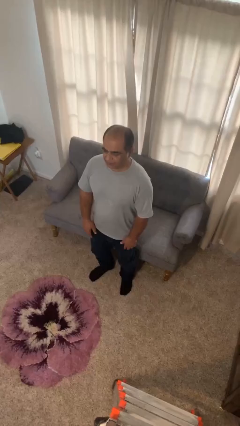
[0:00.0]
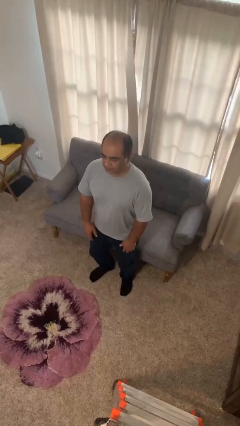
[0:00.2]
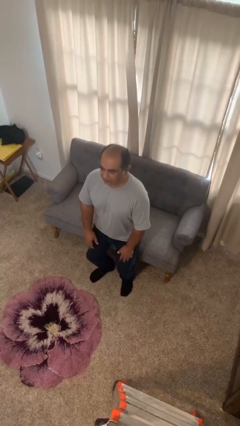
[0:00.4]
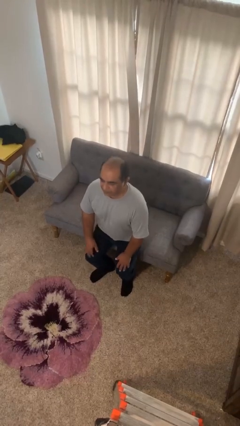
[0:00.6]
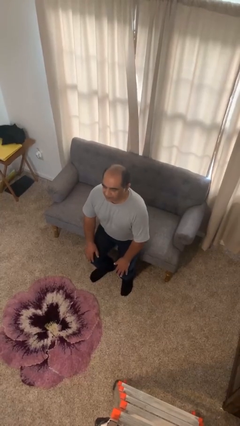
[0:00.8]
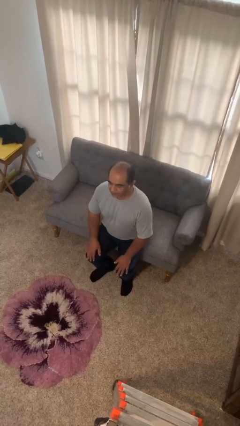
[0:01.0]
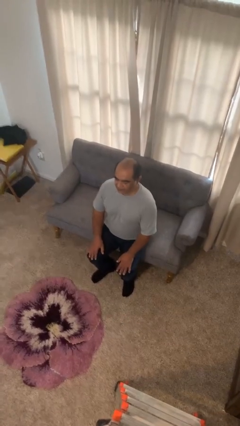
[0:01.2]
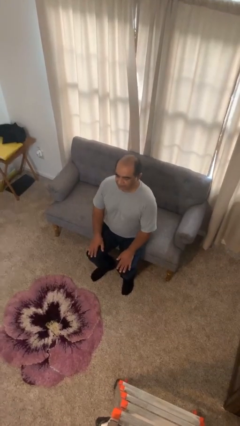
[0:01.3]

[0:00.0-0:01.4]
person sits down

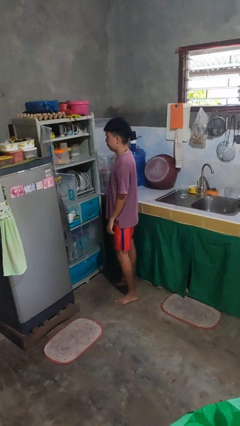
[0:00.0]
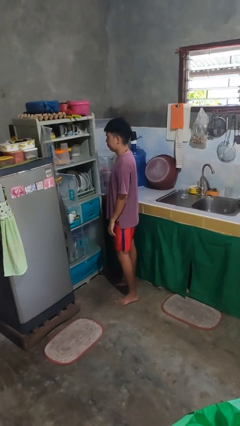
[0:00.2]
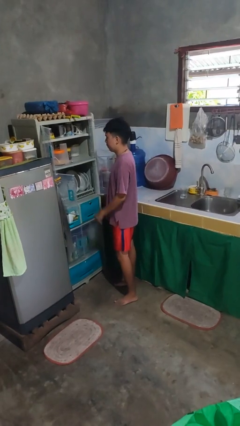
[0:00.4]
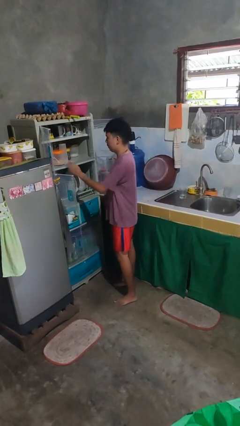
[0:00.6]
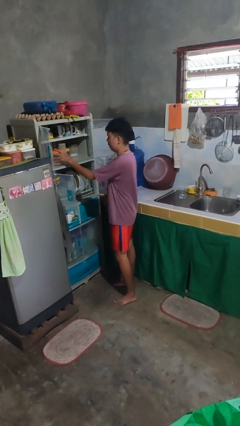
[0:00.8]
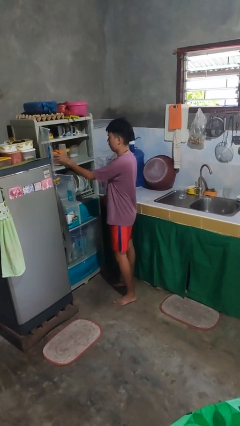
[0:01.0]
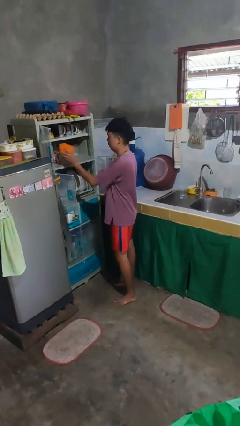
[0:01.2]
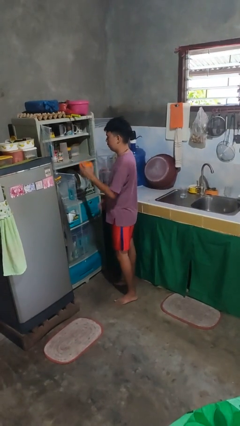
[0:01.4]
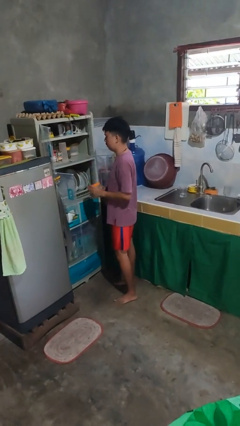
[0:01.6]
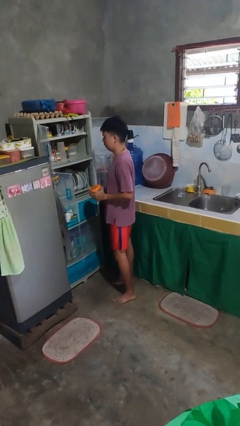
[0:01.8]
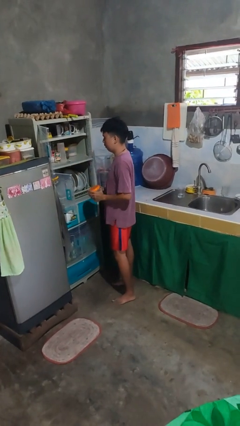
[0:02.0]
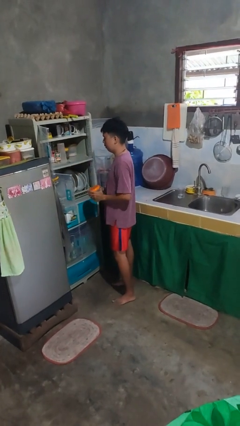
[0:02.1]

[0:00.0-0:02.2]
person takes object from cabinet

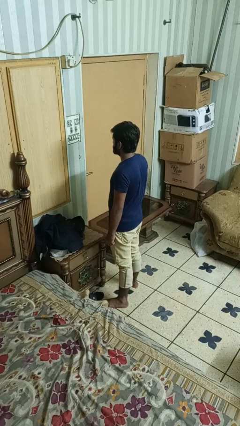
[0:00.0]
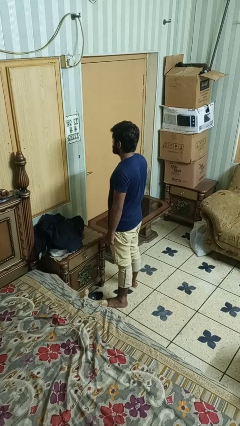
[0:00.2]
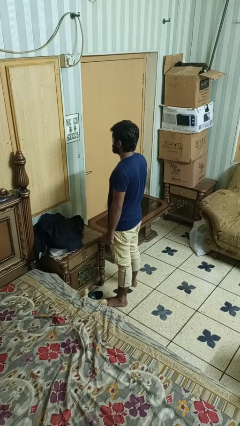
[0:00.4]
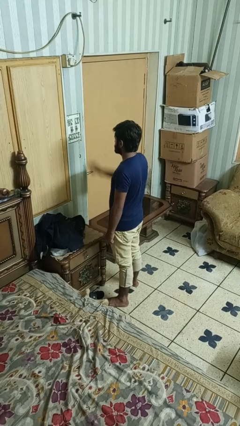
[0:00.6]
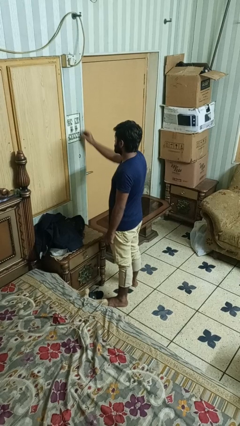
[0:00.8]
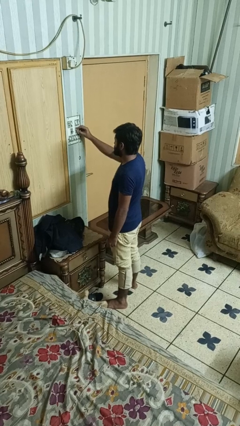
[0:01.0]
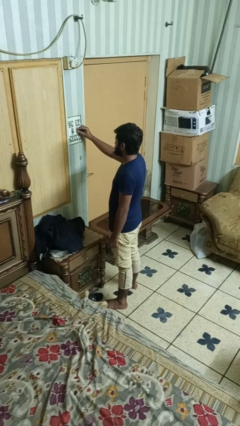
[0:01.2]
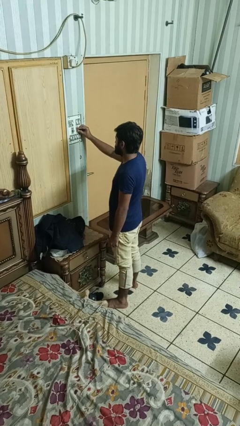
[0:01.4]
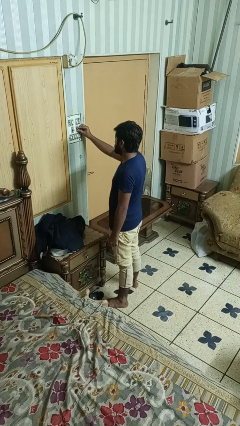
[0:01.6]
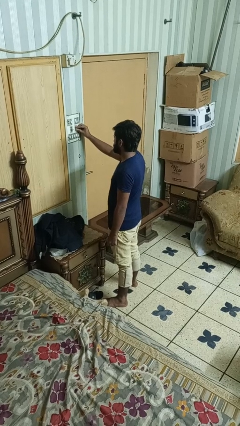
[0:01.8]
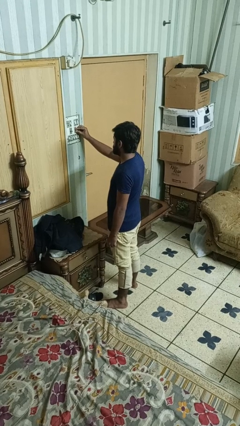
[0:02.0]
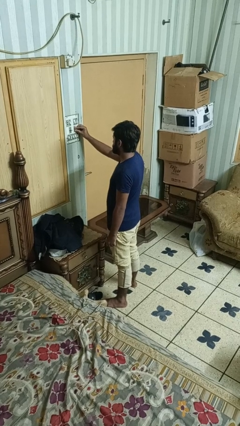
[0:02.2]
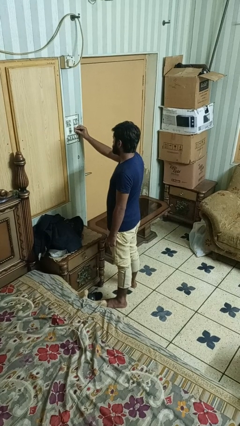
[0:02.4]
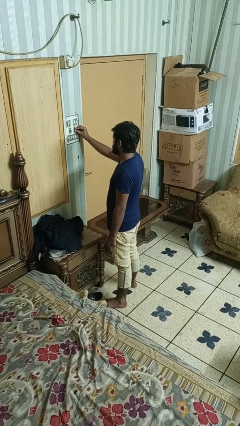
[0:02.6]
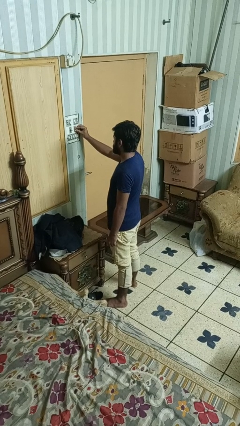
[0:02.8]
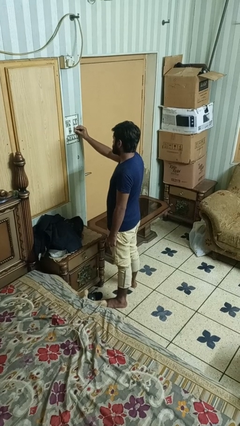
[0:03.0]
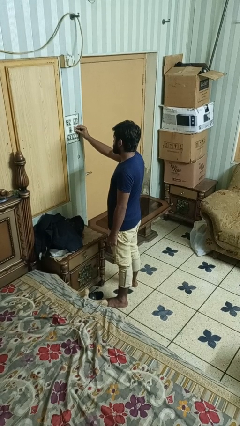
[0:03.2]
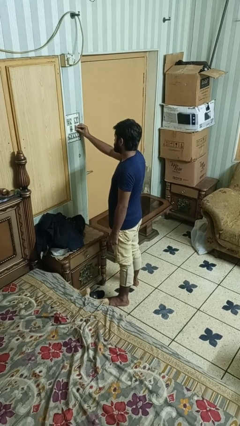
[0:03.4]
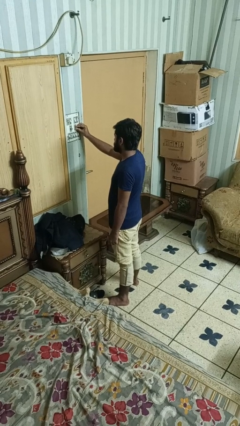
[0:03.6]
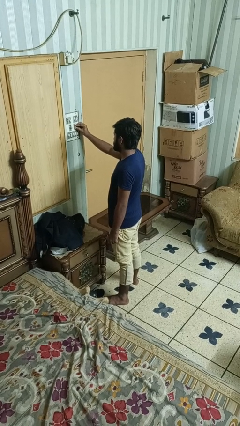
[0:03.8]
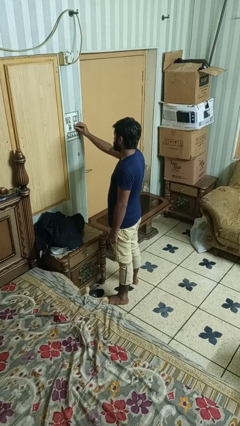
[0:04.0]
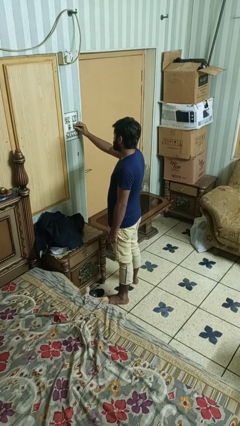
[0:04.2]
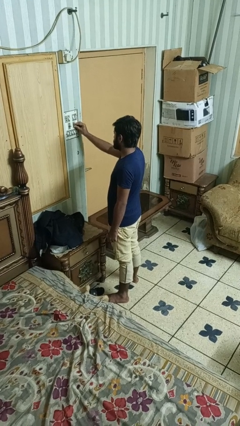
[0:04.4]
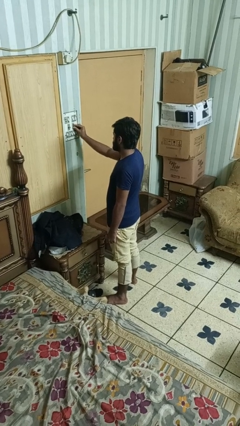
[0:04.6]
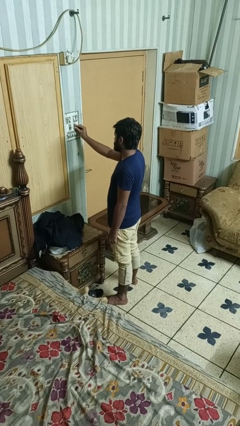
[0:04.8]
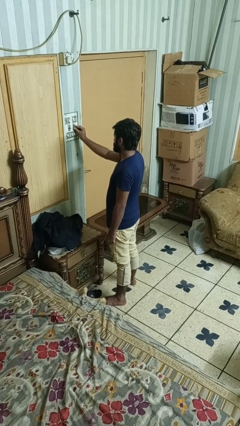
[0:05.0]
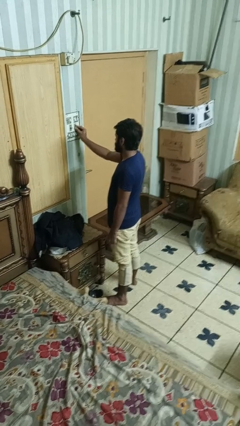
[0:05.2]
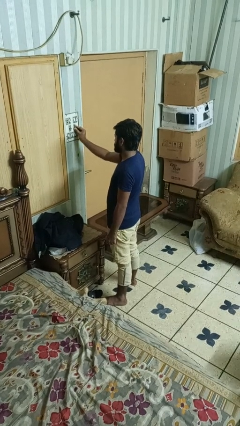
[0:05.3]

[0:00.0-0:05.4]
person adjusts thermostat

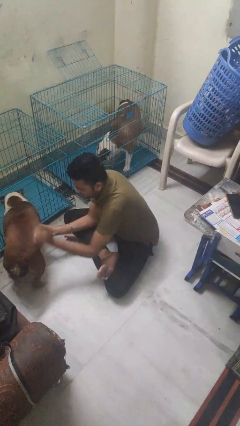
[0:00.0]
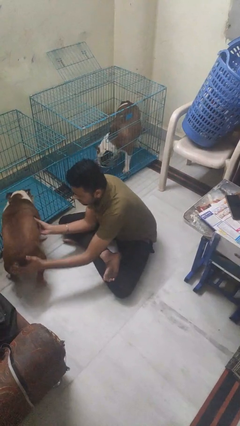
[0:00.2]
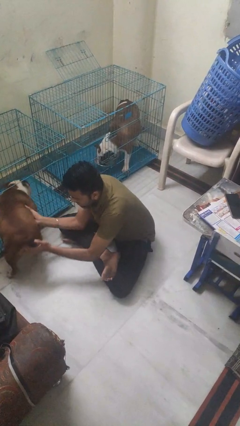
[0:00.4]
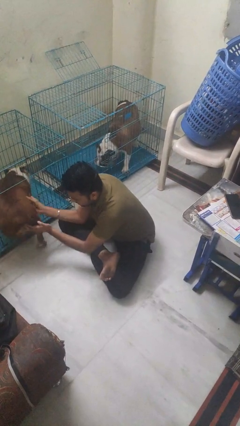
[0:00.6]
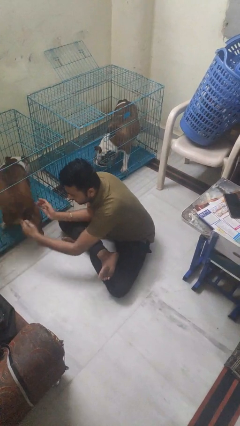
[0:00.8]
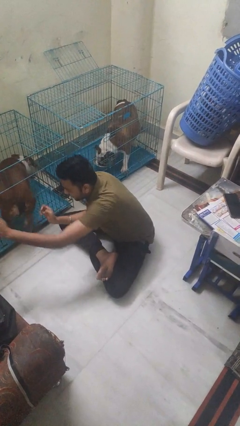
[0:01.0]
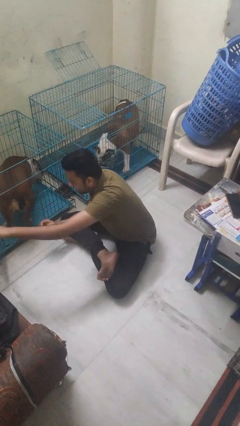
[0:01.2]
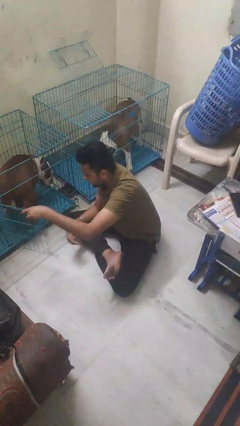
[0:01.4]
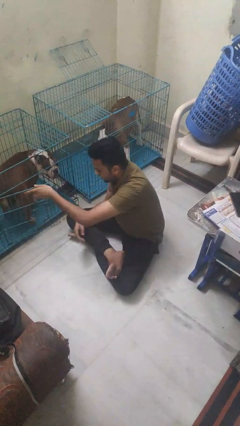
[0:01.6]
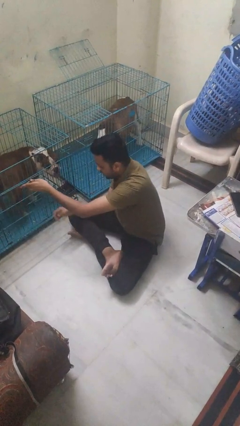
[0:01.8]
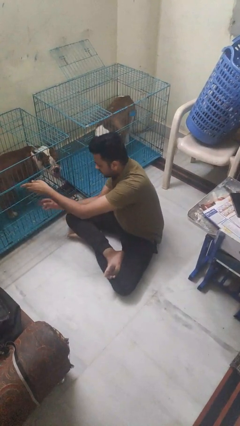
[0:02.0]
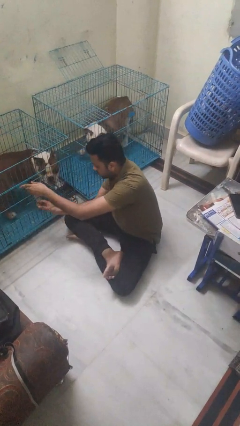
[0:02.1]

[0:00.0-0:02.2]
person crates dog

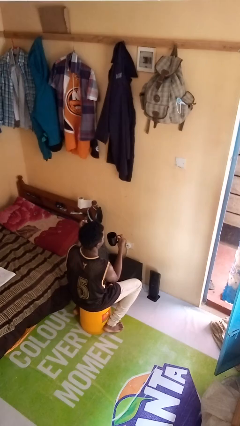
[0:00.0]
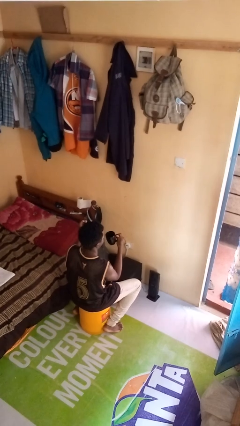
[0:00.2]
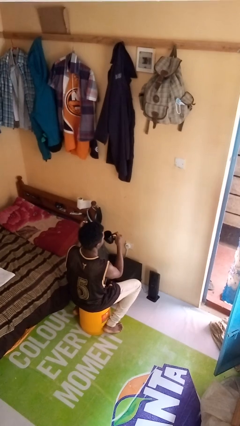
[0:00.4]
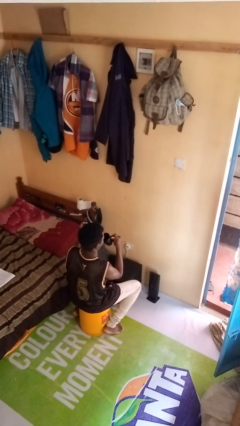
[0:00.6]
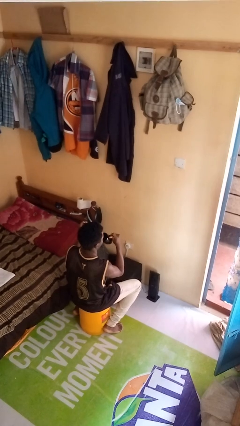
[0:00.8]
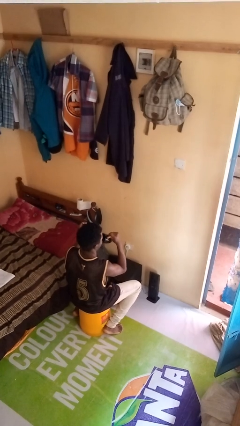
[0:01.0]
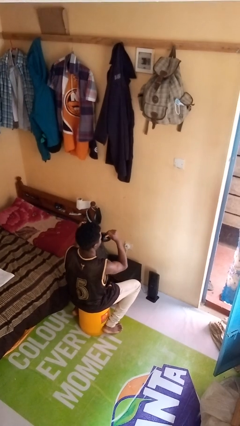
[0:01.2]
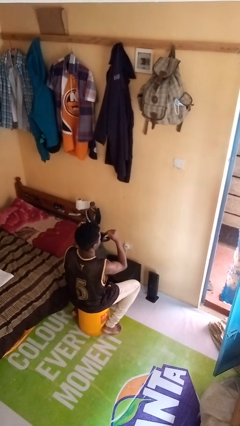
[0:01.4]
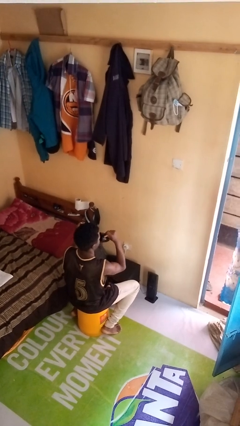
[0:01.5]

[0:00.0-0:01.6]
person drinks from mug

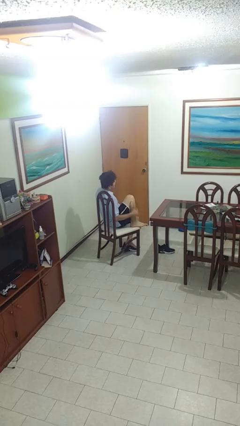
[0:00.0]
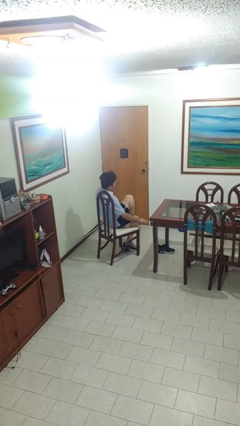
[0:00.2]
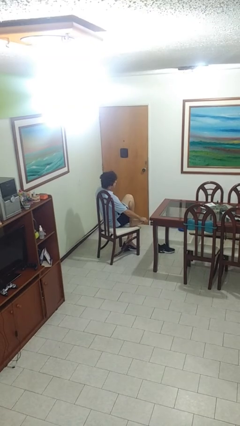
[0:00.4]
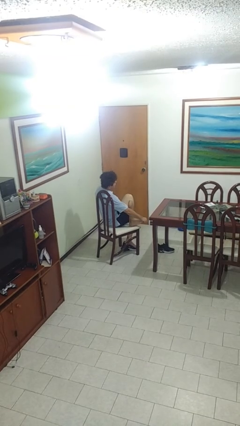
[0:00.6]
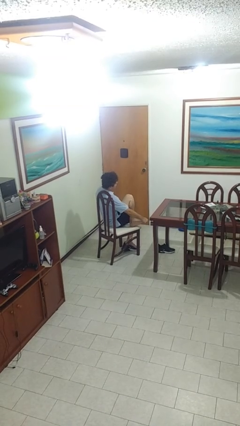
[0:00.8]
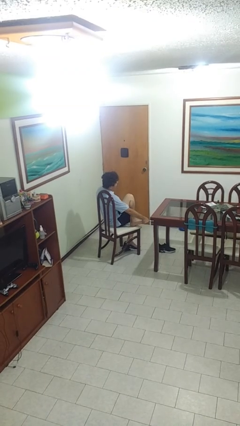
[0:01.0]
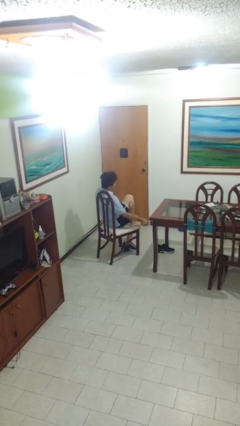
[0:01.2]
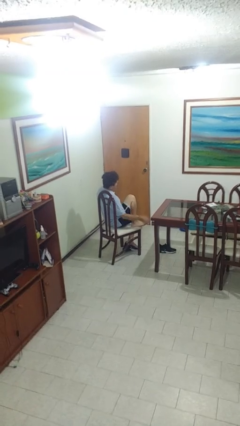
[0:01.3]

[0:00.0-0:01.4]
person rubs foot

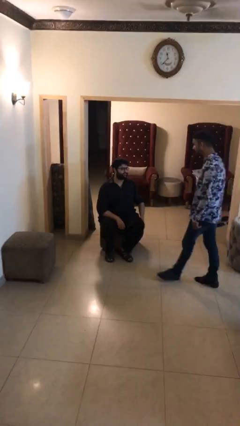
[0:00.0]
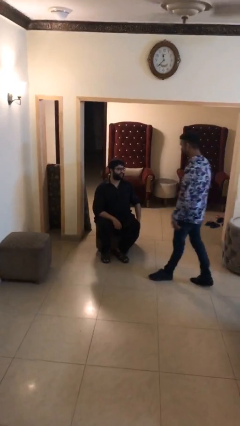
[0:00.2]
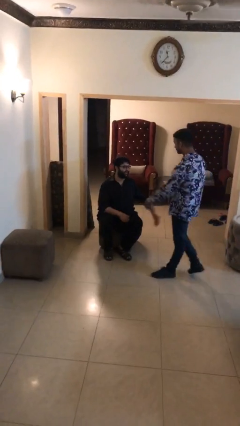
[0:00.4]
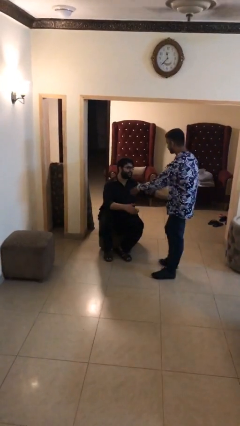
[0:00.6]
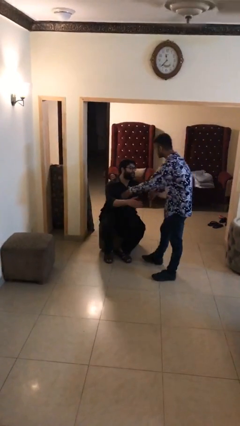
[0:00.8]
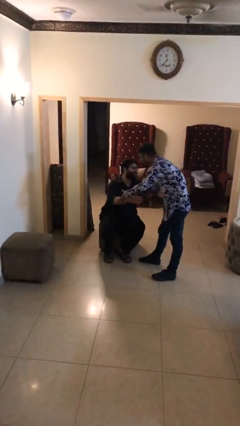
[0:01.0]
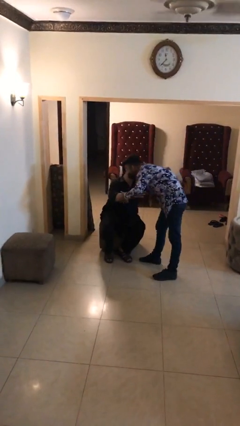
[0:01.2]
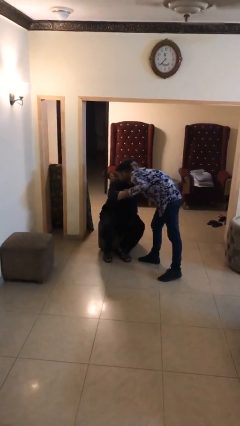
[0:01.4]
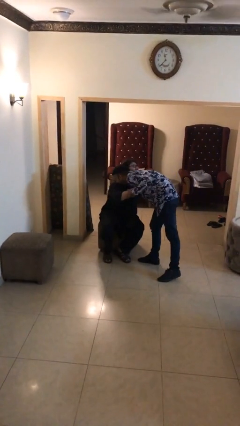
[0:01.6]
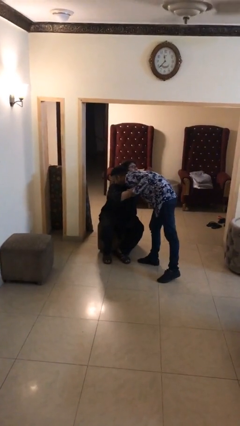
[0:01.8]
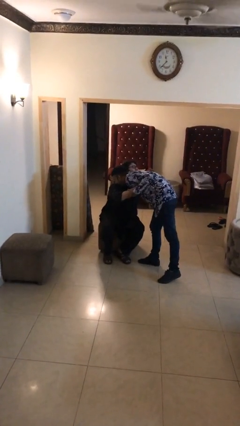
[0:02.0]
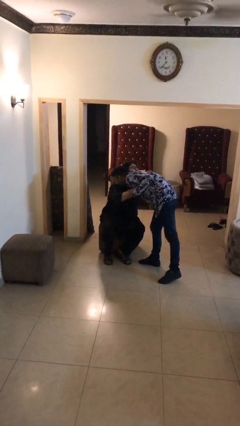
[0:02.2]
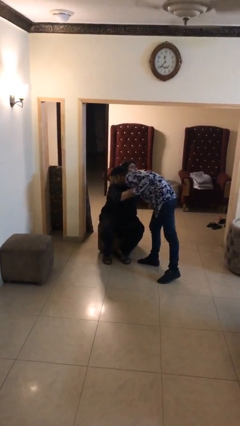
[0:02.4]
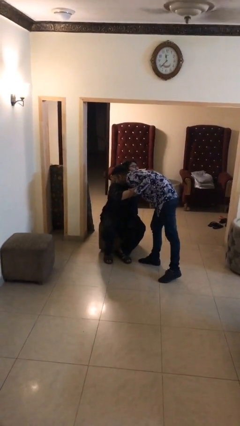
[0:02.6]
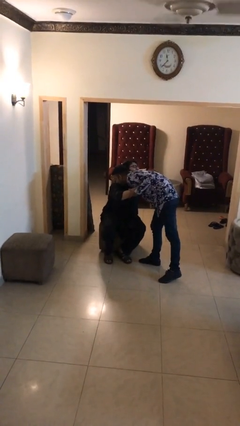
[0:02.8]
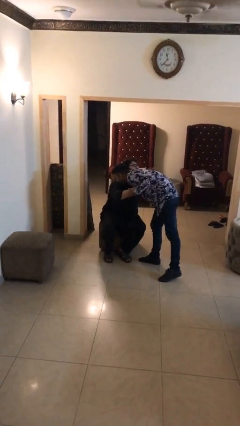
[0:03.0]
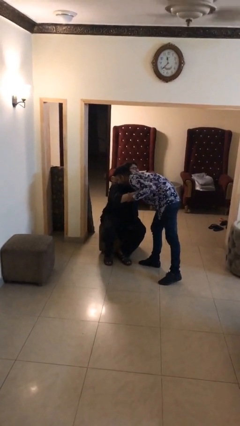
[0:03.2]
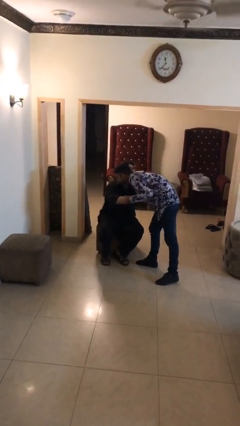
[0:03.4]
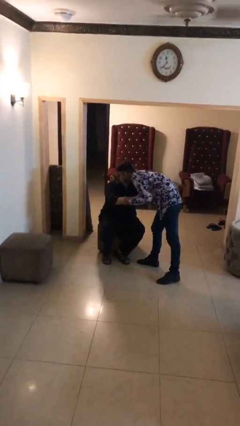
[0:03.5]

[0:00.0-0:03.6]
person embraces person
